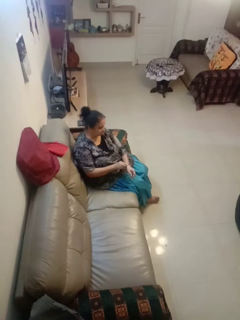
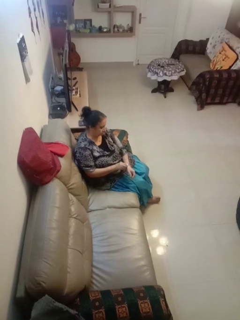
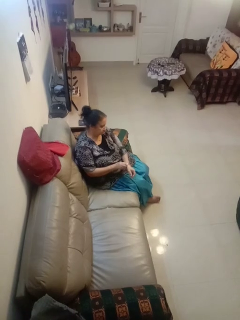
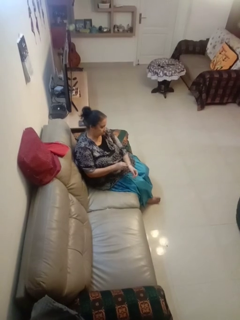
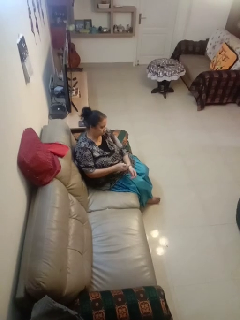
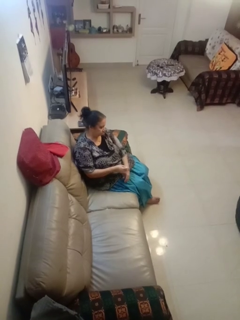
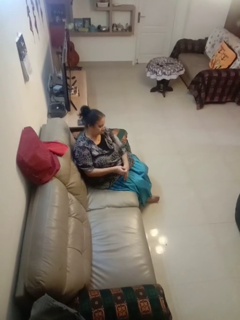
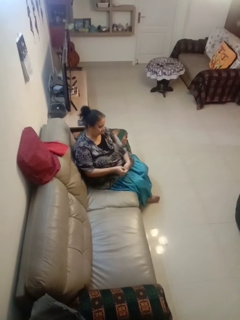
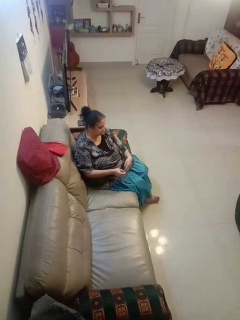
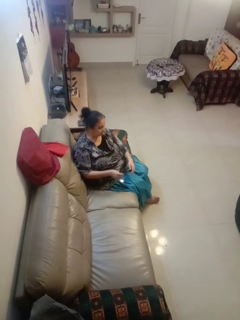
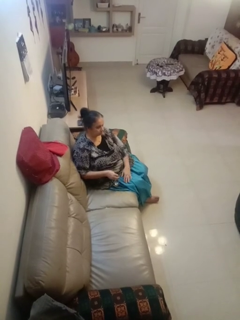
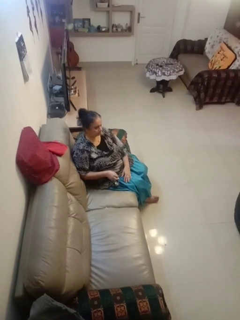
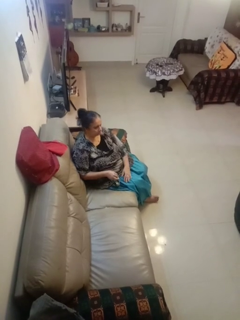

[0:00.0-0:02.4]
person takes off wristwatch

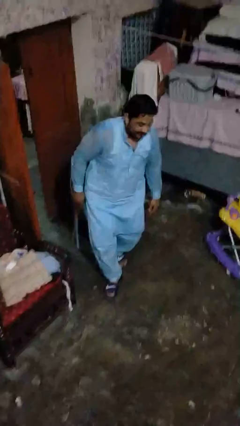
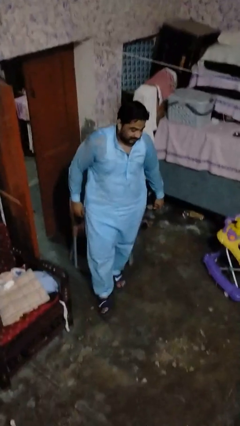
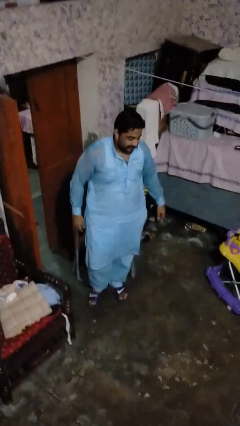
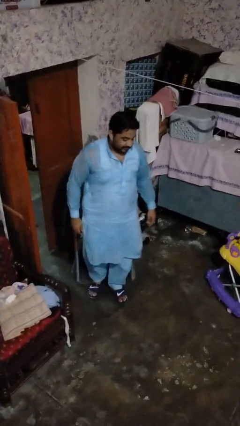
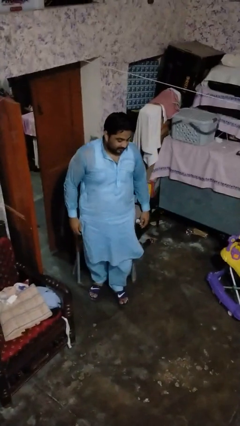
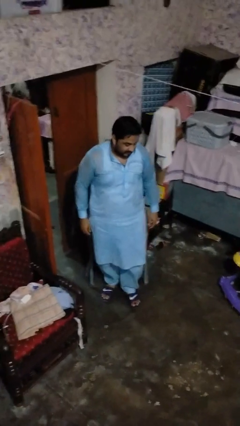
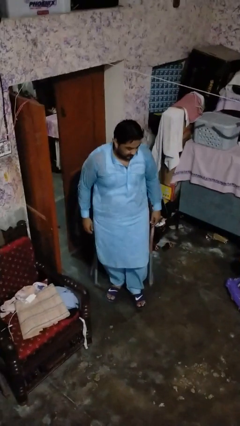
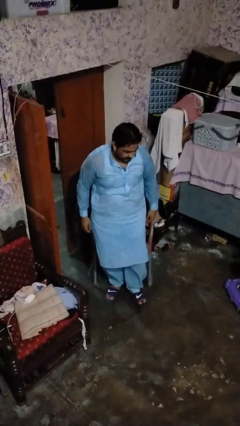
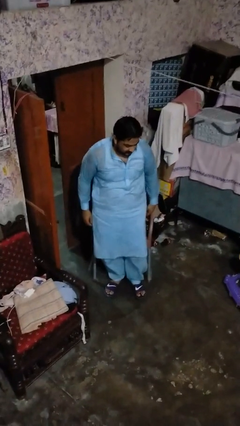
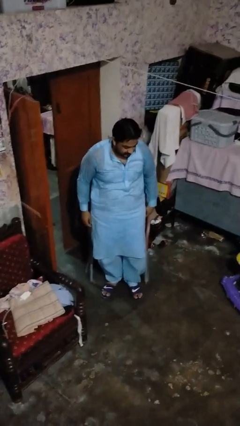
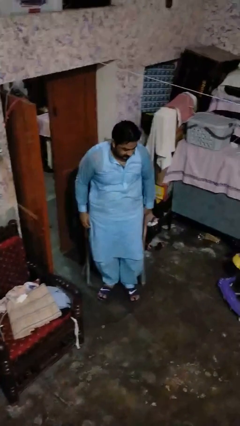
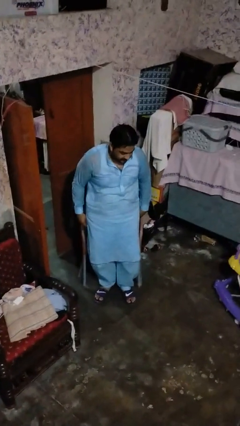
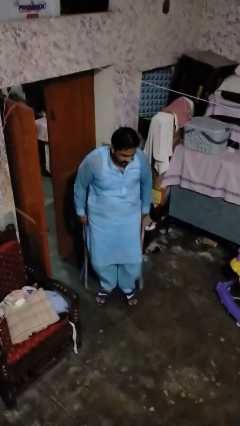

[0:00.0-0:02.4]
person stands up from floor

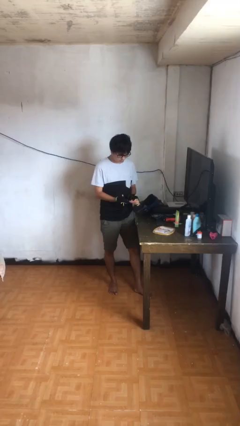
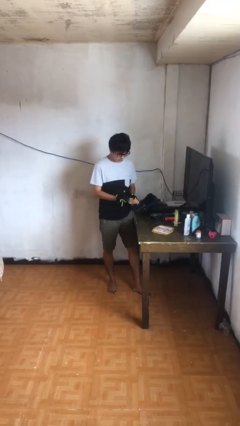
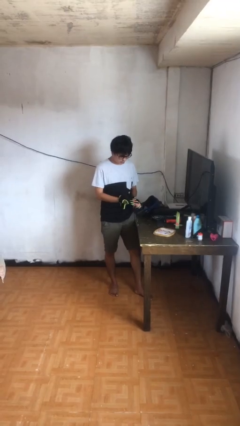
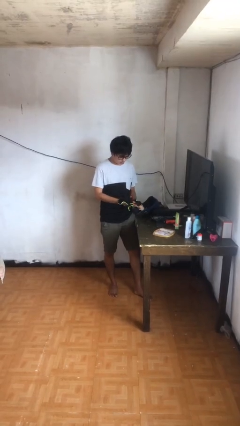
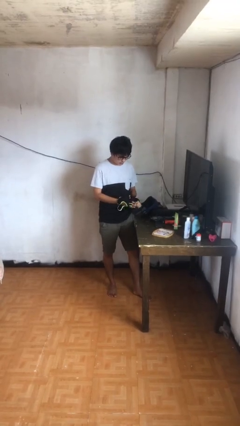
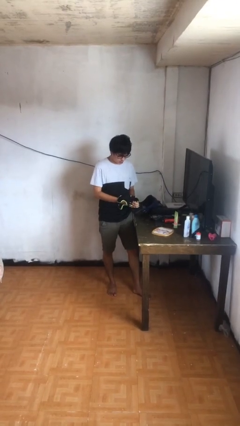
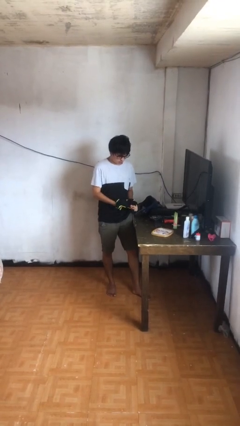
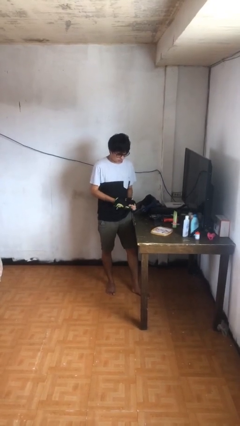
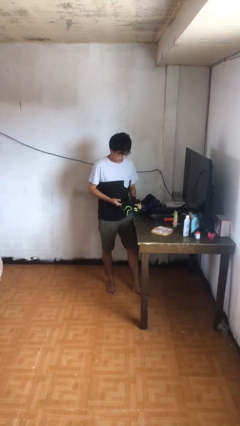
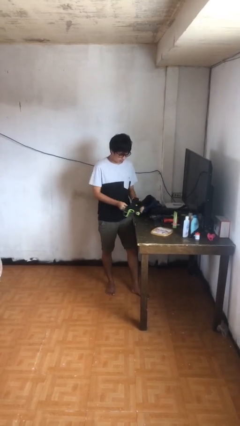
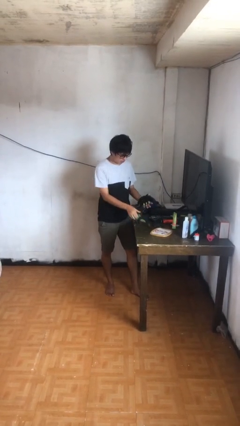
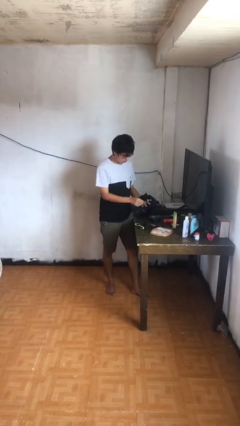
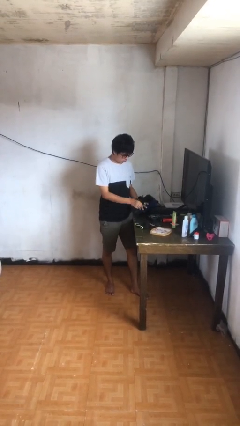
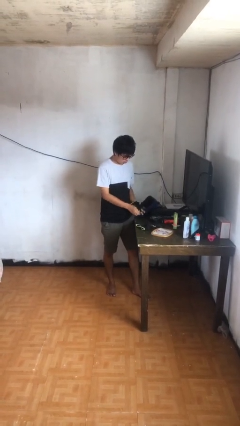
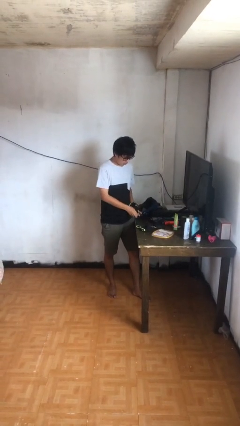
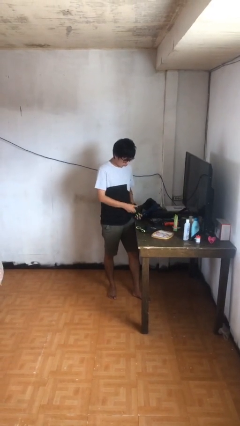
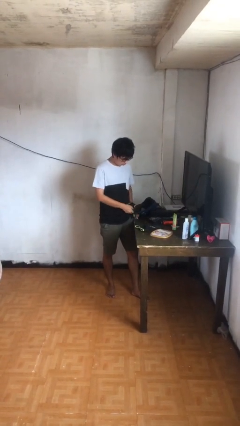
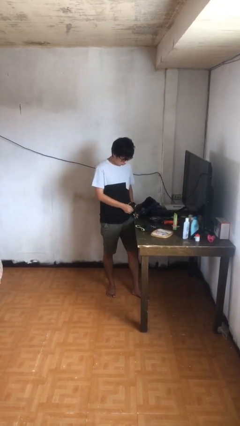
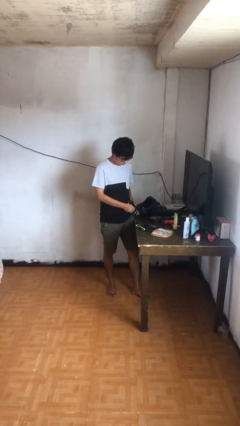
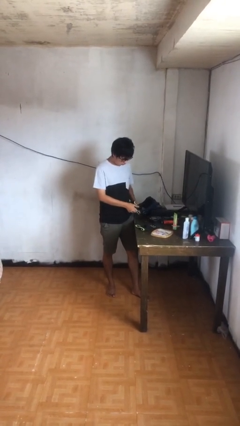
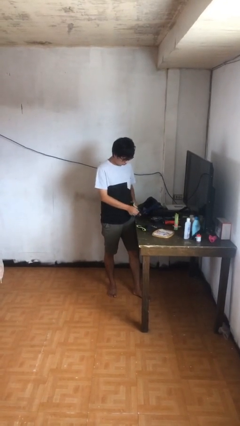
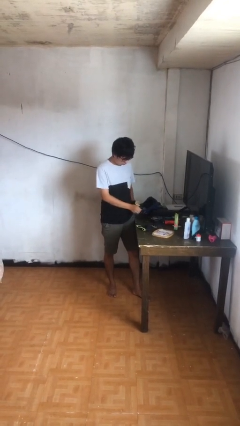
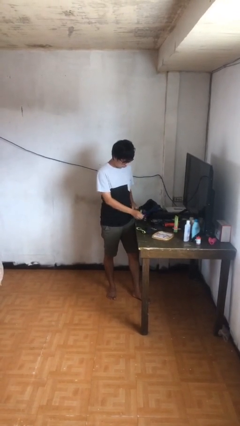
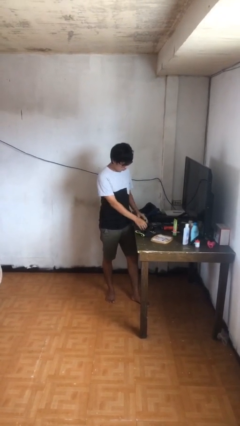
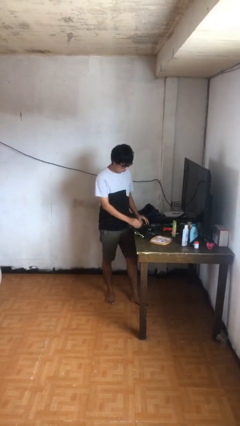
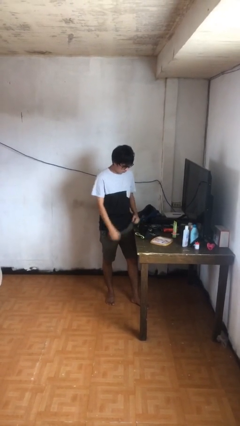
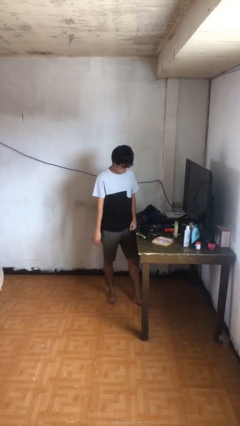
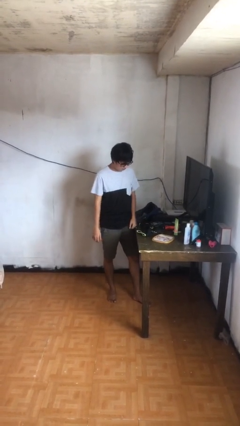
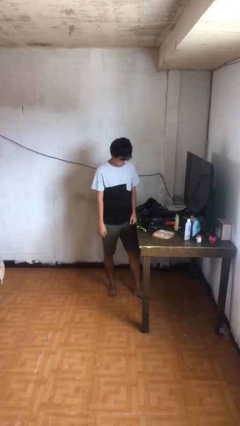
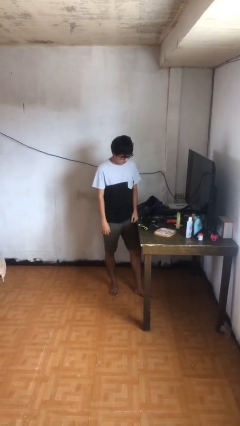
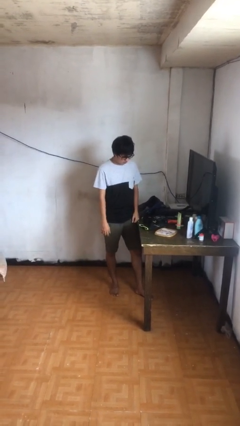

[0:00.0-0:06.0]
person takes off gloves

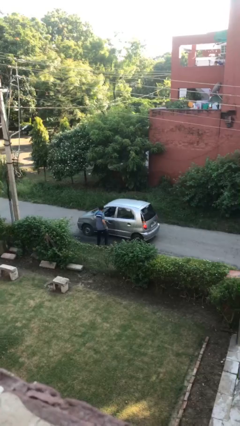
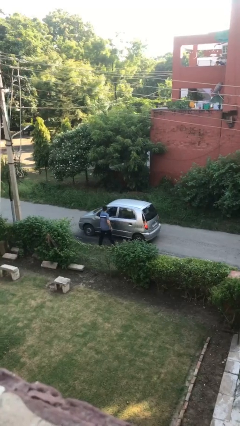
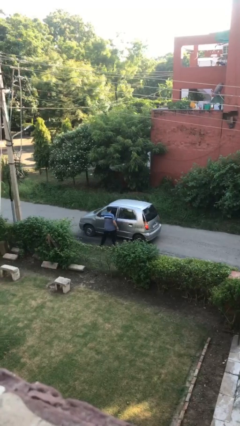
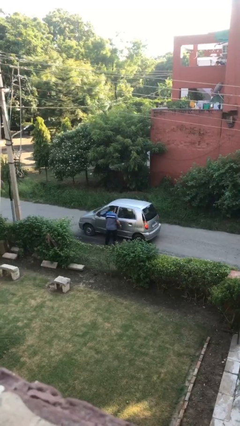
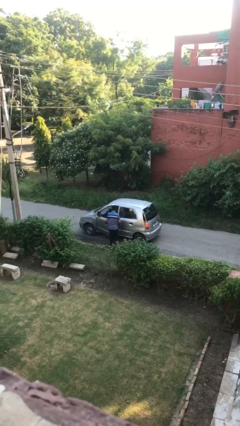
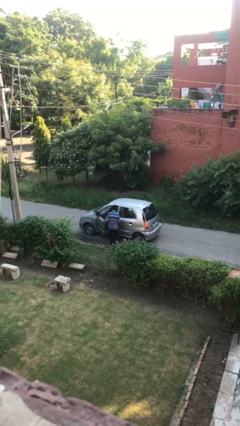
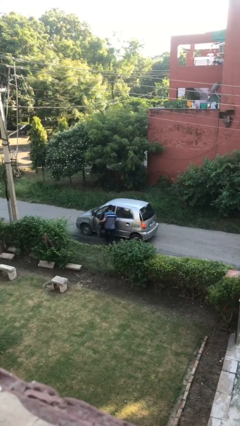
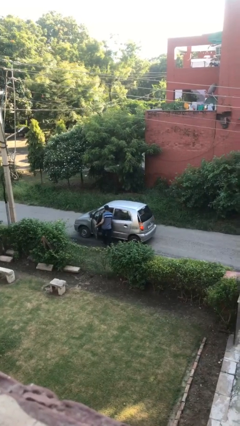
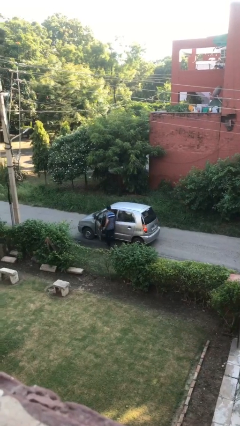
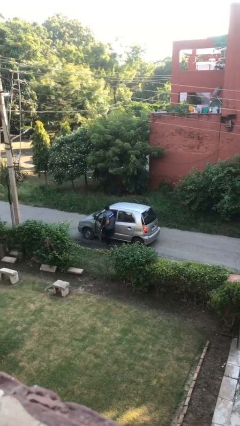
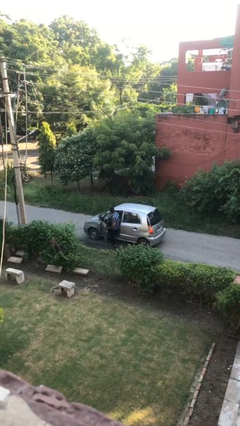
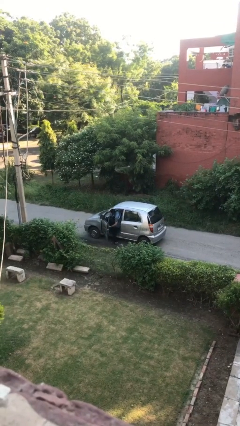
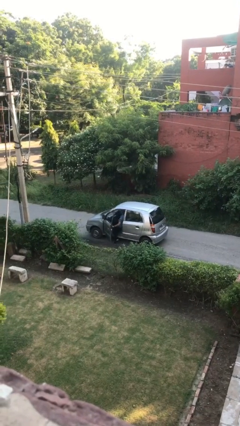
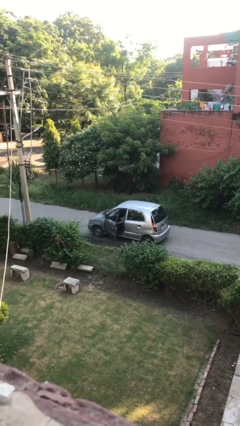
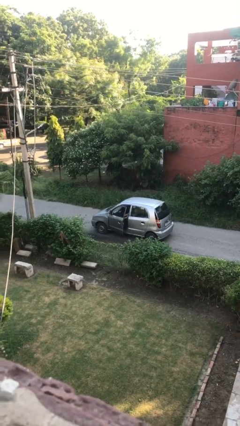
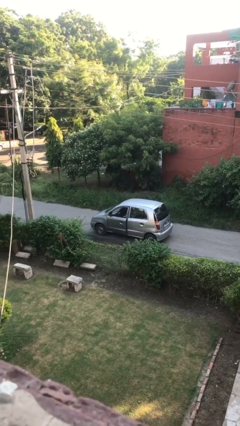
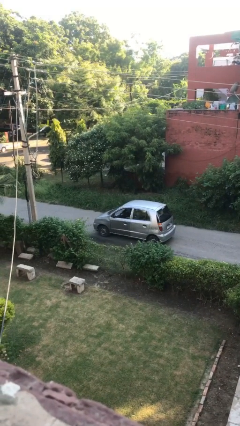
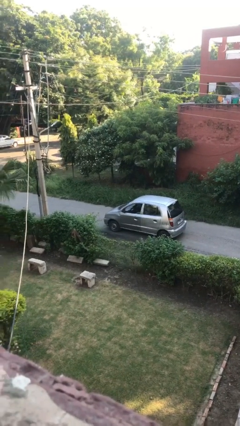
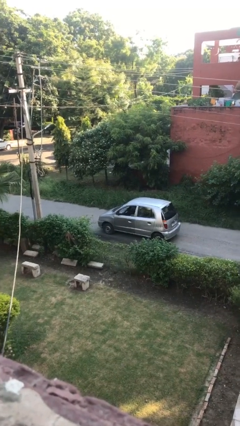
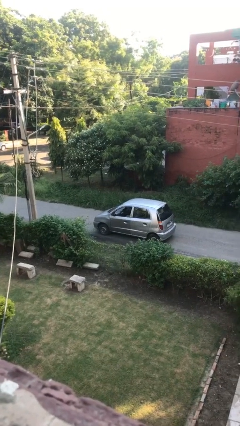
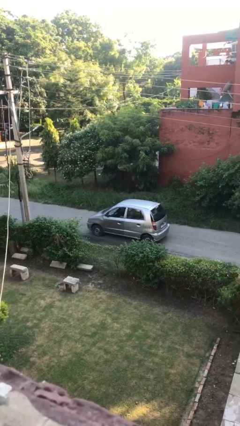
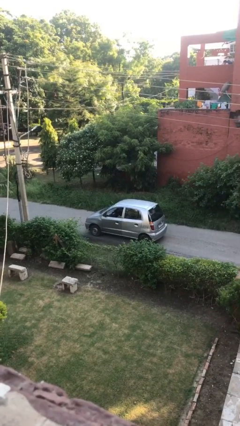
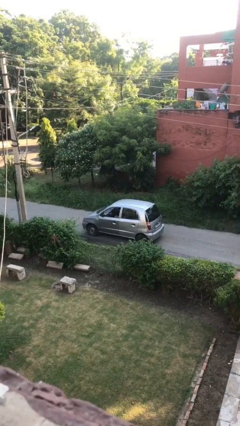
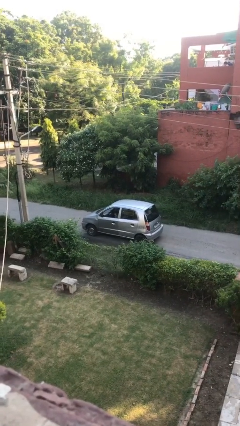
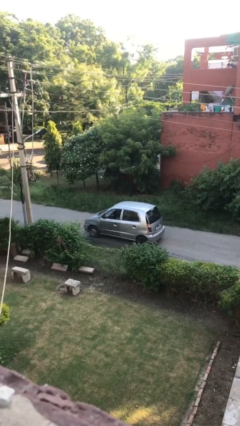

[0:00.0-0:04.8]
car picks up person

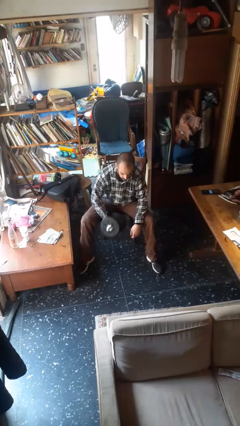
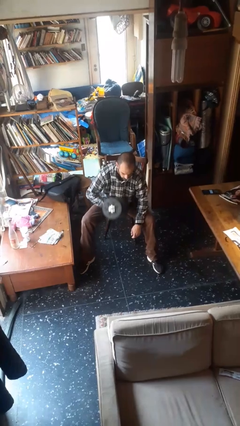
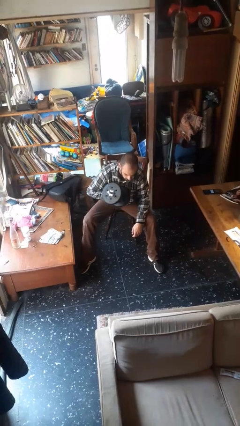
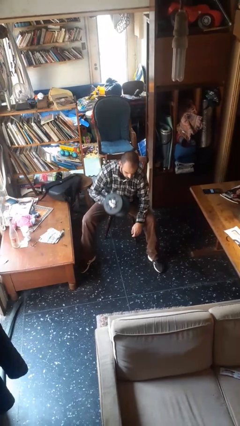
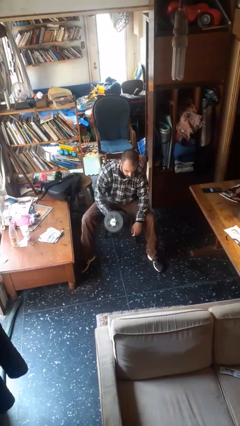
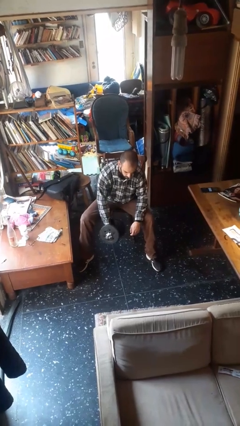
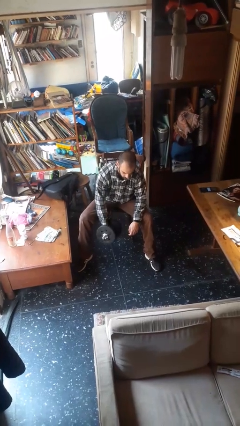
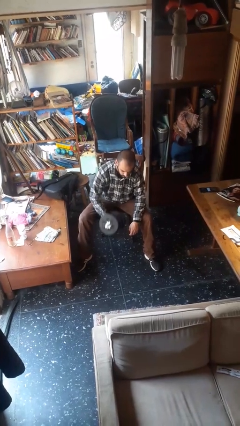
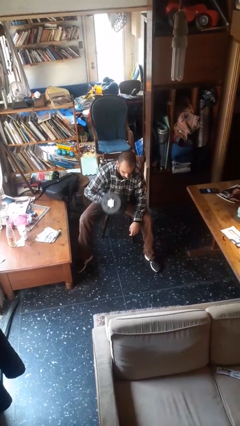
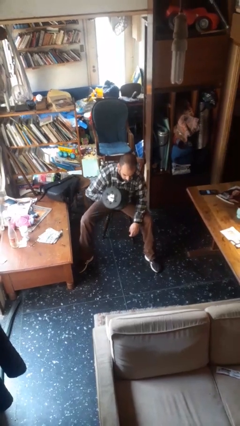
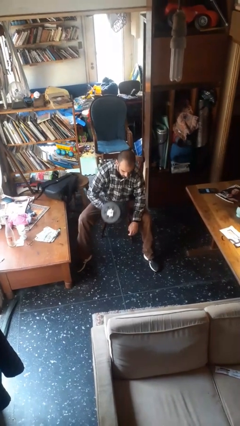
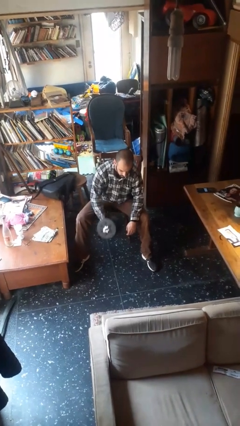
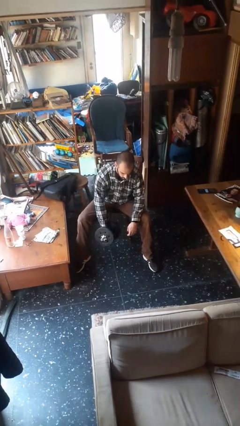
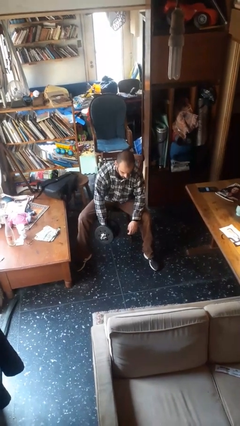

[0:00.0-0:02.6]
person lifts dumbbells
